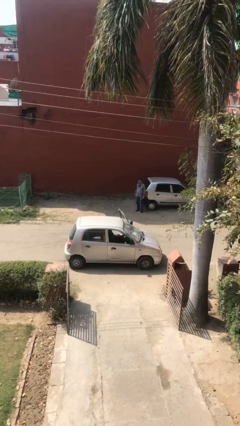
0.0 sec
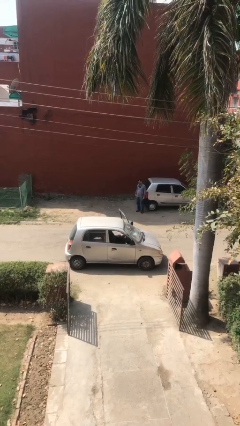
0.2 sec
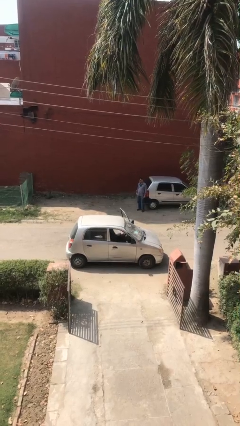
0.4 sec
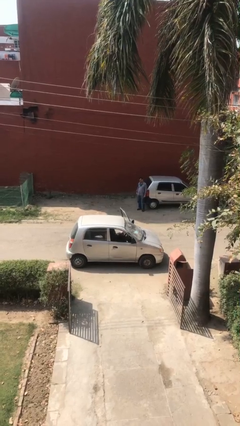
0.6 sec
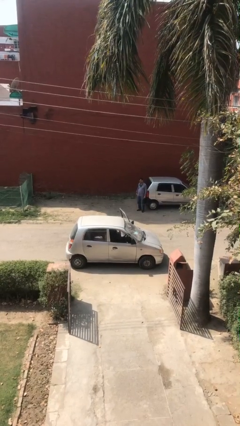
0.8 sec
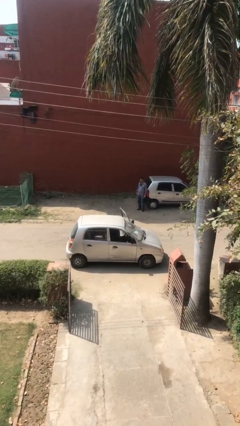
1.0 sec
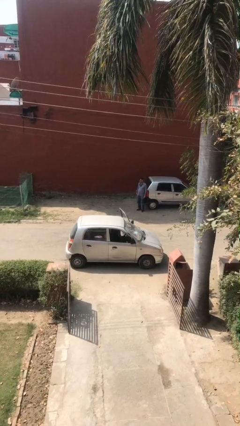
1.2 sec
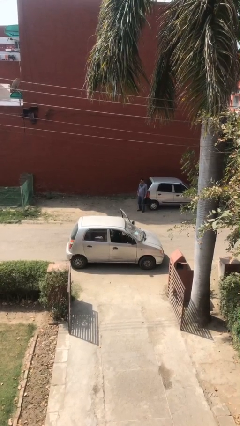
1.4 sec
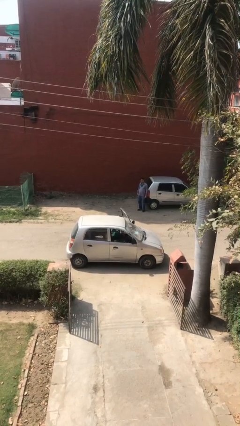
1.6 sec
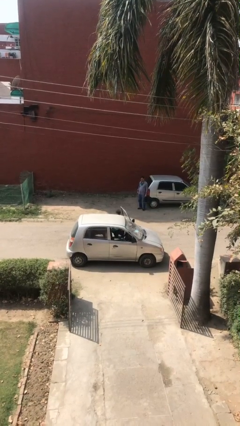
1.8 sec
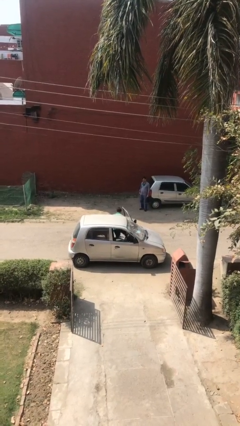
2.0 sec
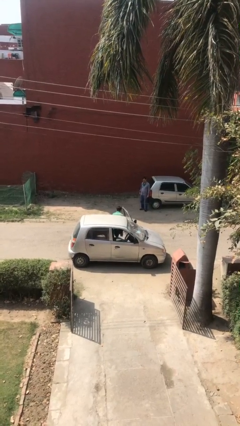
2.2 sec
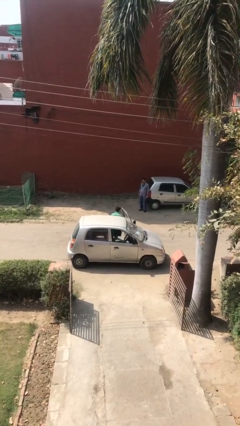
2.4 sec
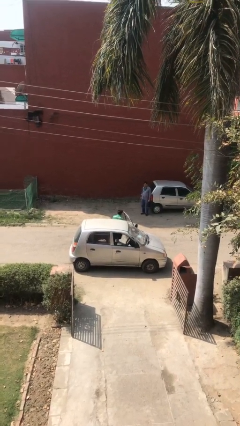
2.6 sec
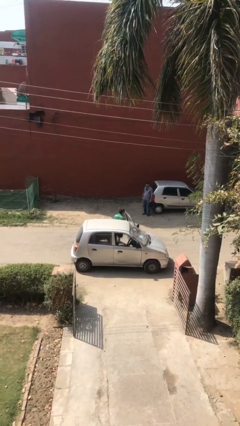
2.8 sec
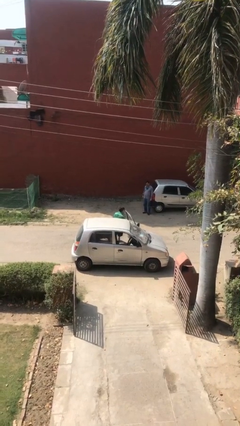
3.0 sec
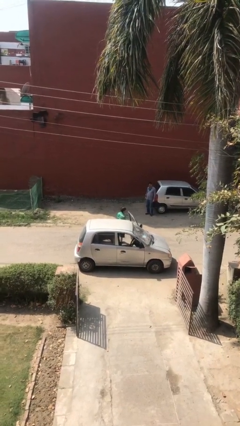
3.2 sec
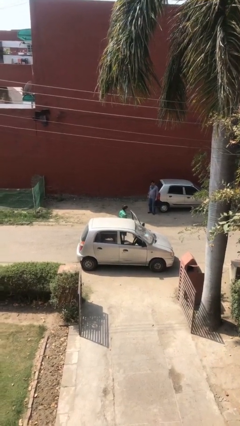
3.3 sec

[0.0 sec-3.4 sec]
person exits car

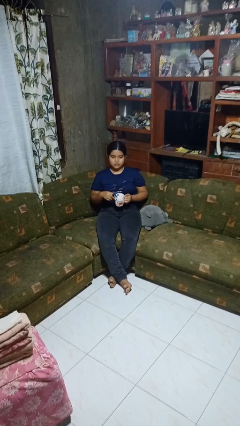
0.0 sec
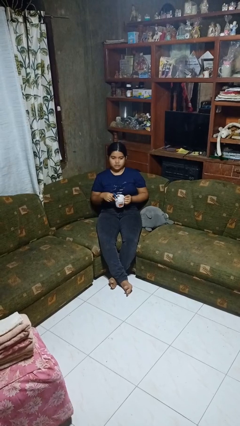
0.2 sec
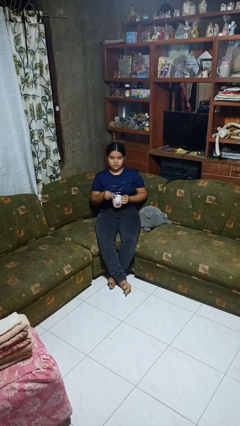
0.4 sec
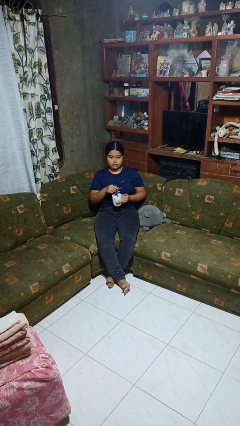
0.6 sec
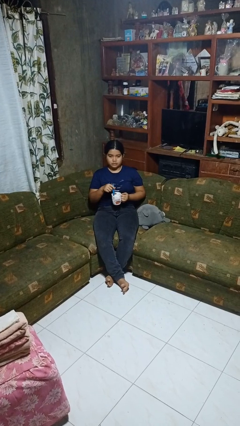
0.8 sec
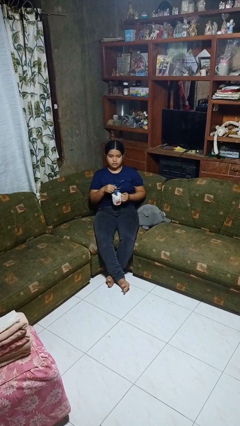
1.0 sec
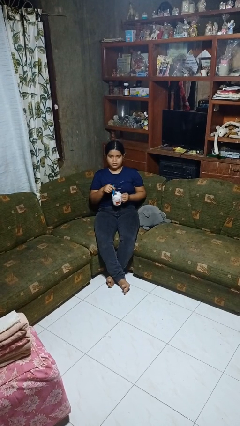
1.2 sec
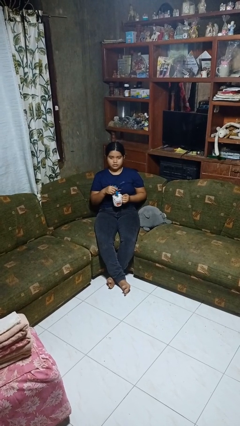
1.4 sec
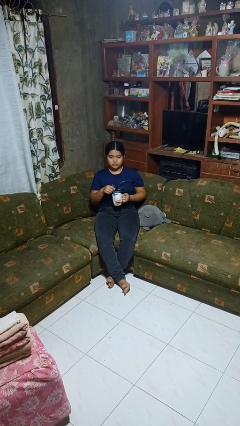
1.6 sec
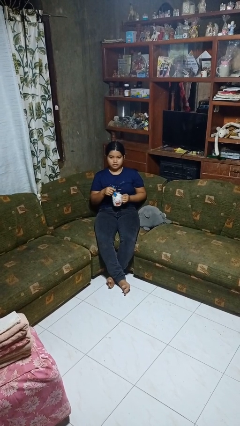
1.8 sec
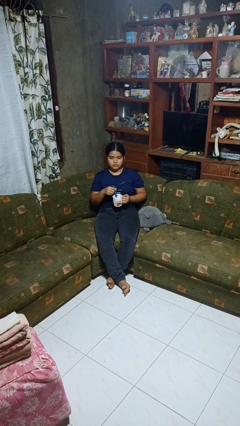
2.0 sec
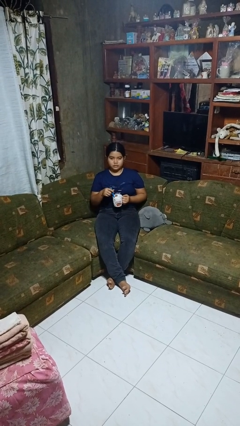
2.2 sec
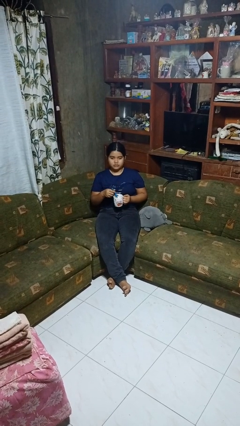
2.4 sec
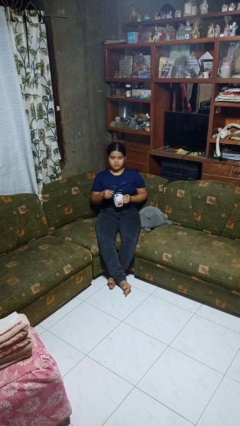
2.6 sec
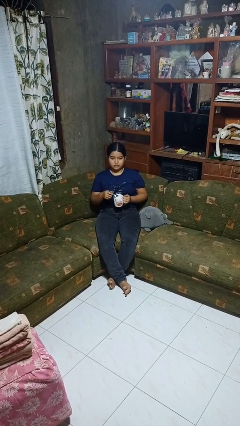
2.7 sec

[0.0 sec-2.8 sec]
person stirs mug

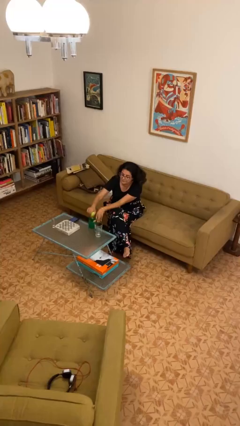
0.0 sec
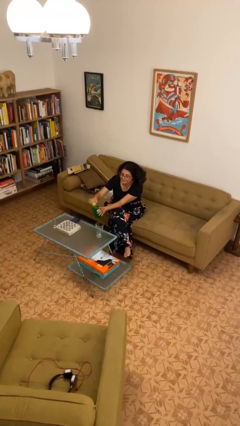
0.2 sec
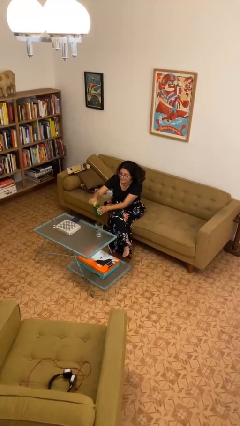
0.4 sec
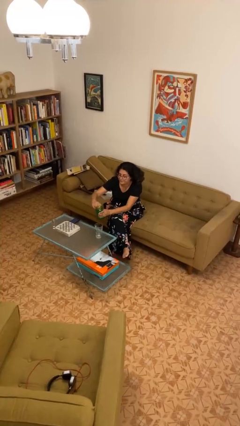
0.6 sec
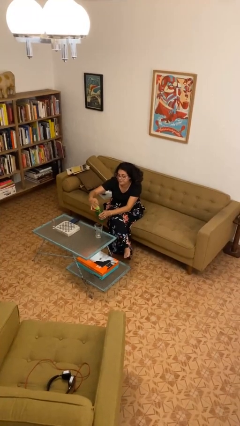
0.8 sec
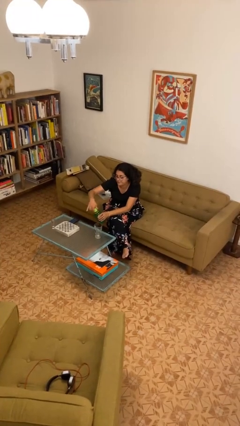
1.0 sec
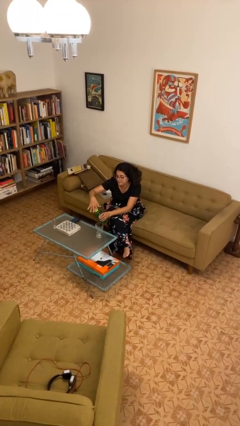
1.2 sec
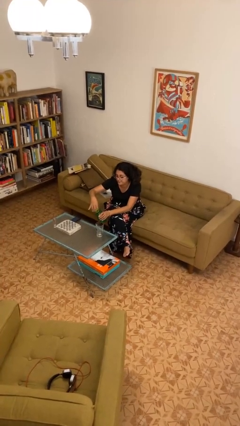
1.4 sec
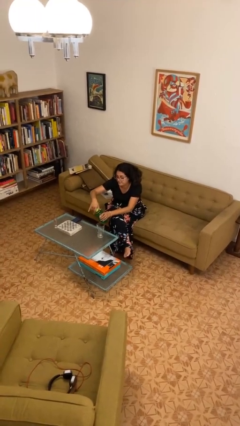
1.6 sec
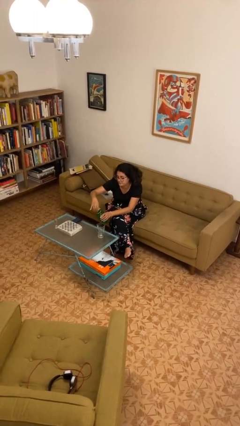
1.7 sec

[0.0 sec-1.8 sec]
person unscrews lid from bottle

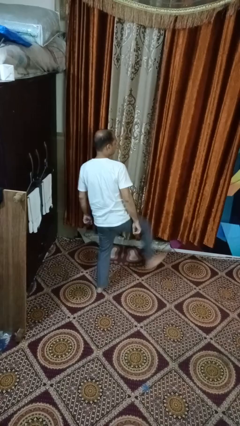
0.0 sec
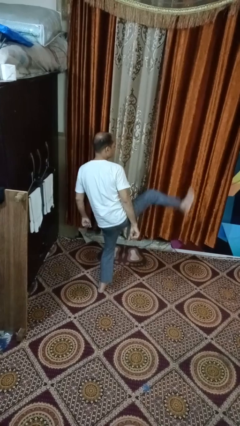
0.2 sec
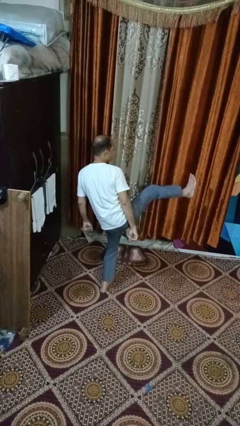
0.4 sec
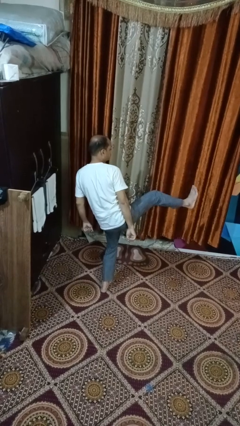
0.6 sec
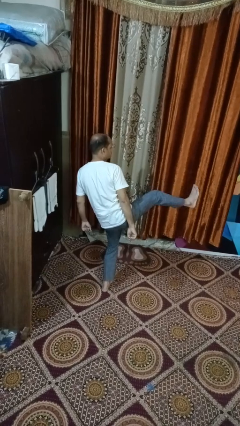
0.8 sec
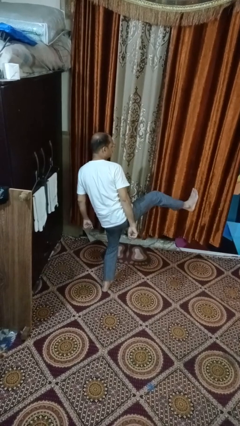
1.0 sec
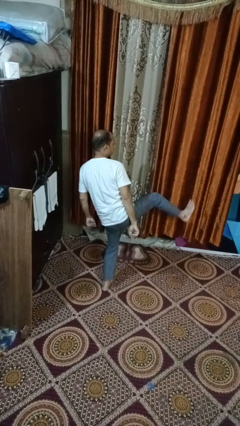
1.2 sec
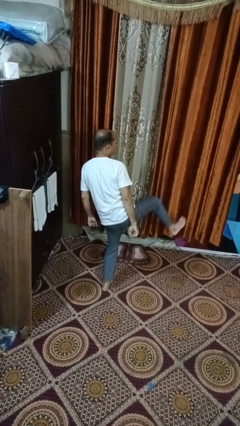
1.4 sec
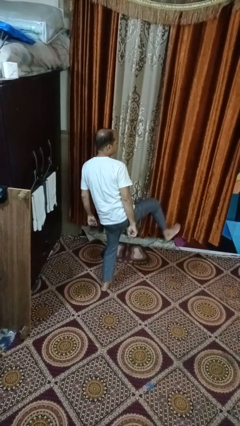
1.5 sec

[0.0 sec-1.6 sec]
person karate kicks

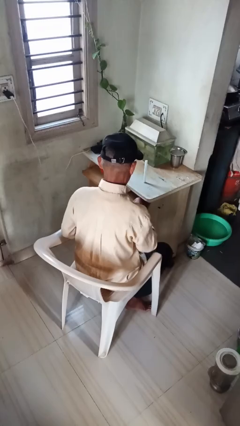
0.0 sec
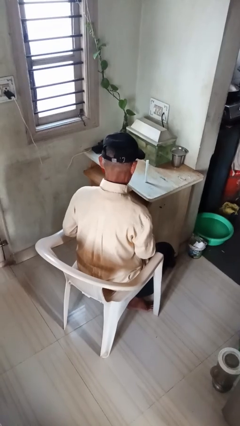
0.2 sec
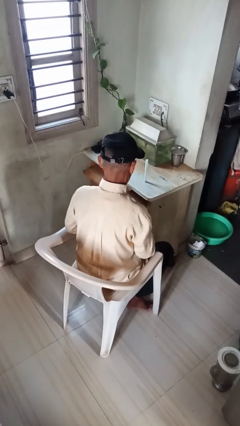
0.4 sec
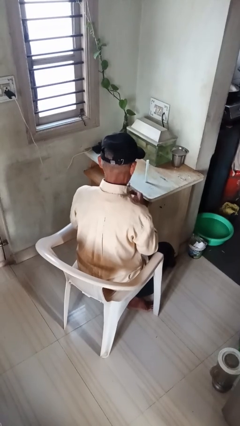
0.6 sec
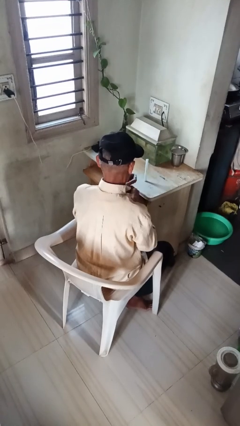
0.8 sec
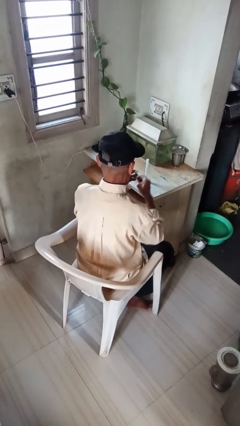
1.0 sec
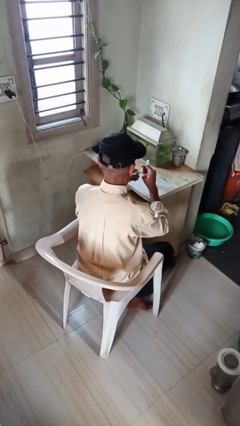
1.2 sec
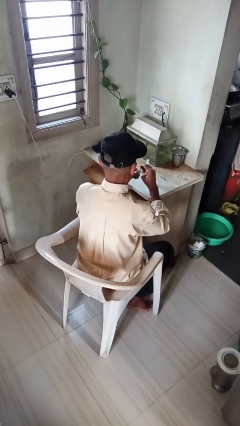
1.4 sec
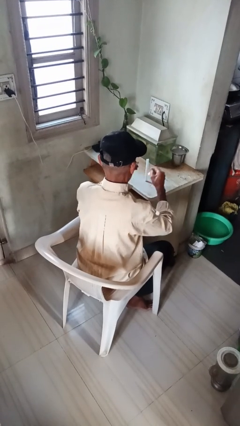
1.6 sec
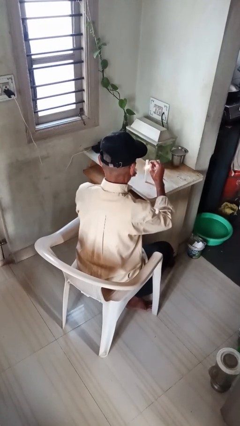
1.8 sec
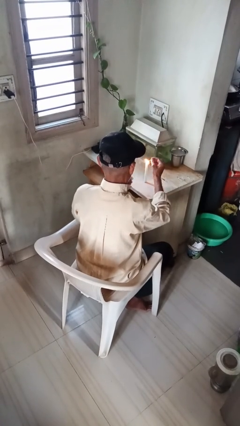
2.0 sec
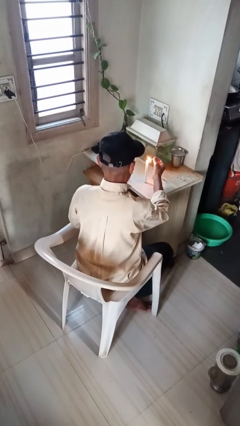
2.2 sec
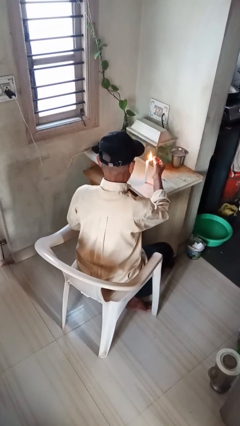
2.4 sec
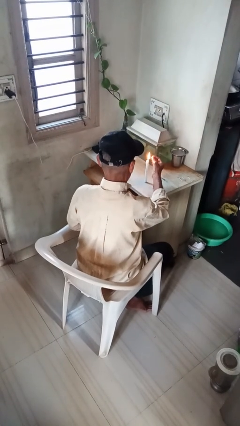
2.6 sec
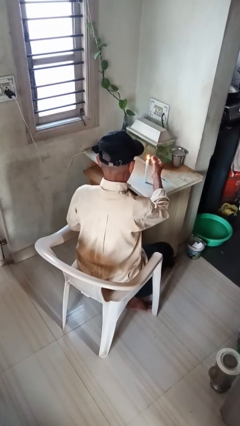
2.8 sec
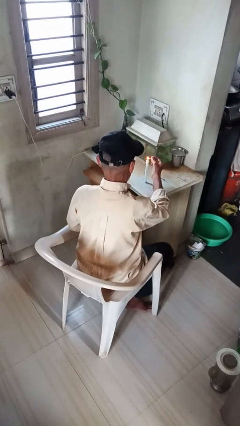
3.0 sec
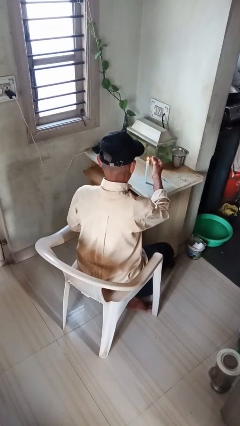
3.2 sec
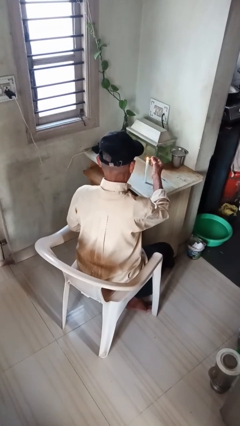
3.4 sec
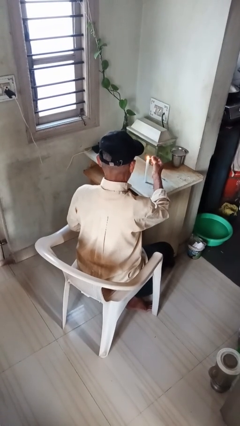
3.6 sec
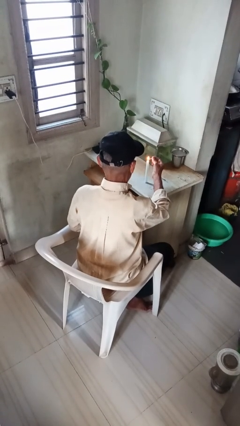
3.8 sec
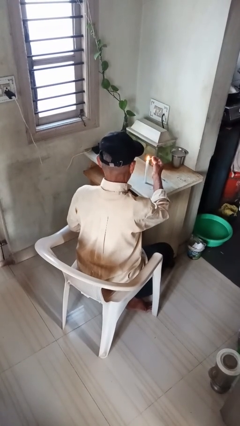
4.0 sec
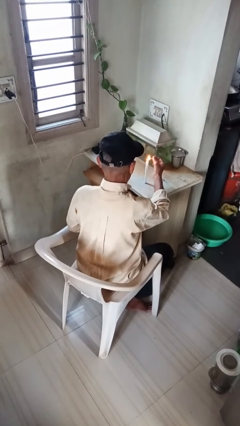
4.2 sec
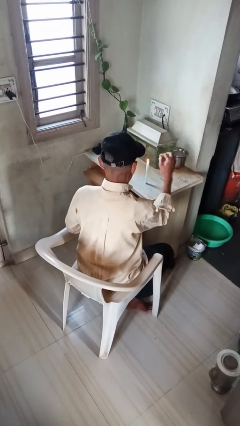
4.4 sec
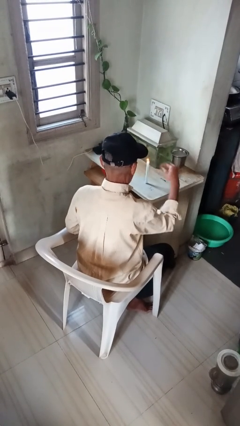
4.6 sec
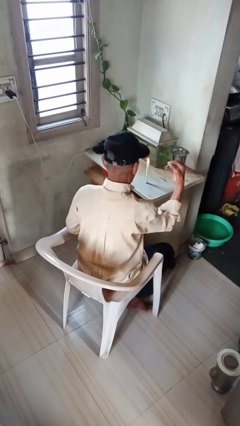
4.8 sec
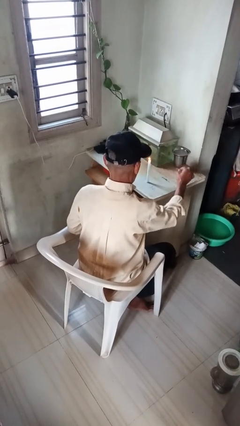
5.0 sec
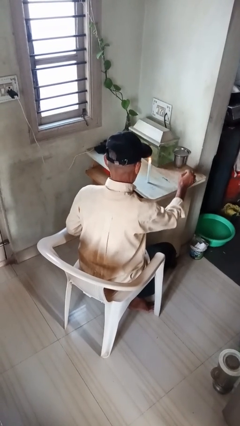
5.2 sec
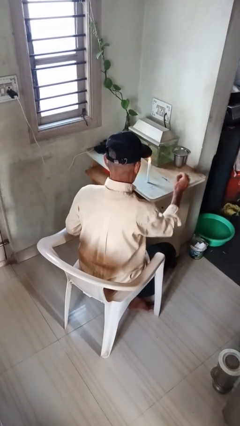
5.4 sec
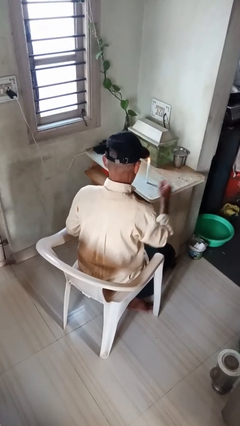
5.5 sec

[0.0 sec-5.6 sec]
person lights candle

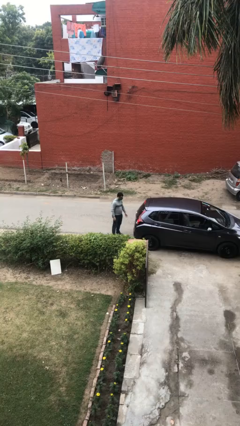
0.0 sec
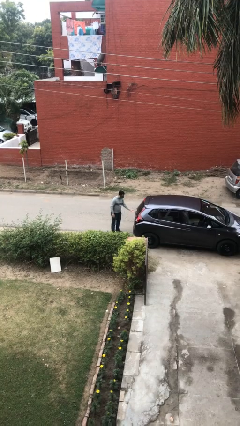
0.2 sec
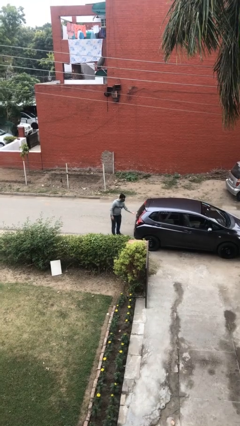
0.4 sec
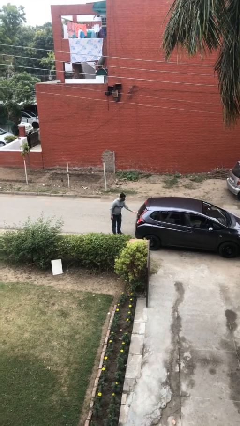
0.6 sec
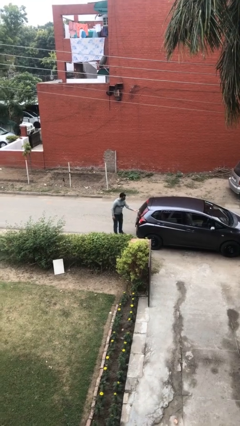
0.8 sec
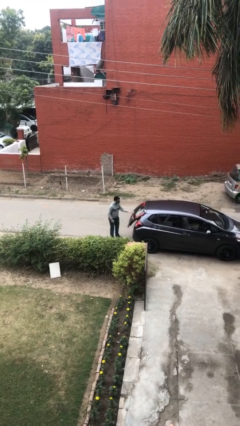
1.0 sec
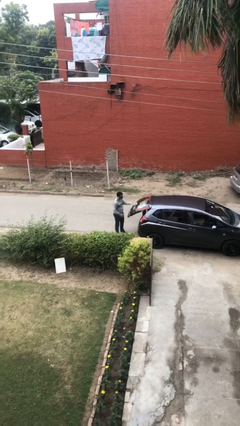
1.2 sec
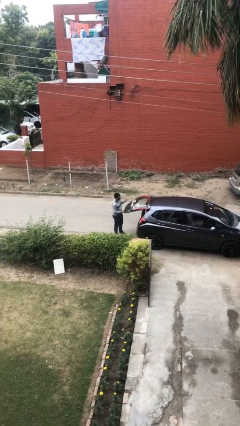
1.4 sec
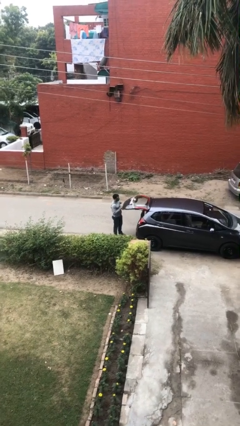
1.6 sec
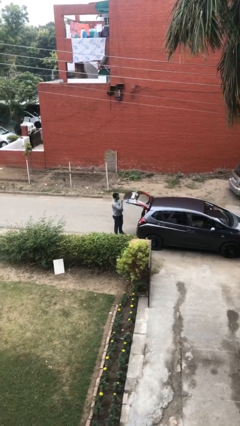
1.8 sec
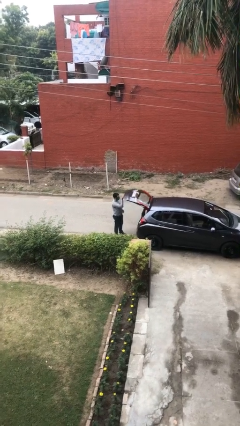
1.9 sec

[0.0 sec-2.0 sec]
person opens car trunk
